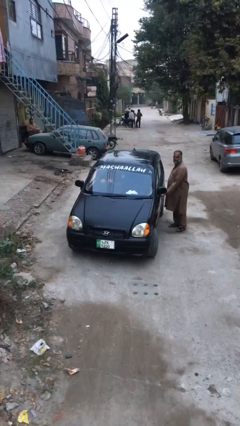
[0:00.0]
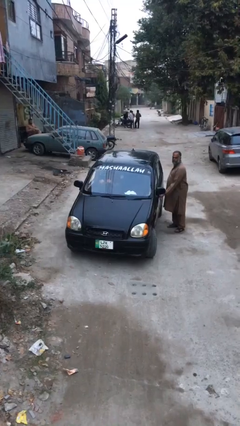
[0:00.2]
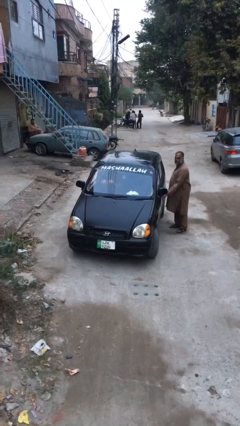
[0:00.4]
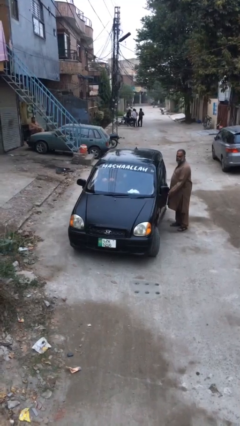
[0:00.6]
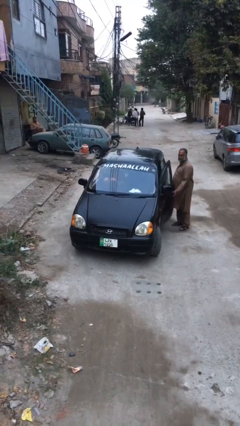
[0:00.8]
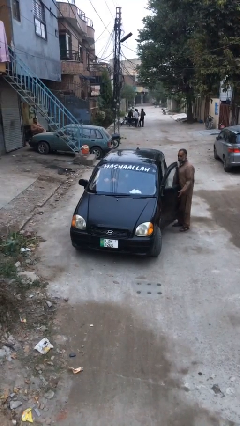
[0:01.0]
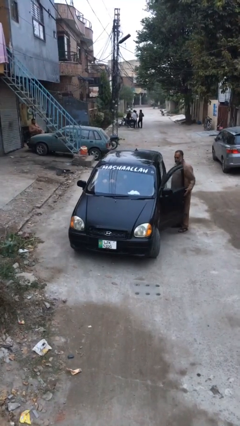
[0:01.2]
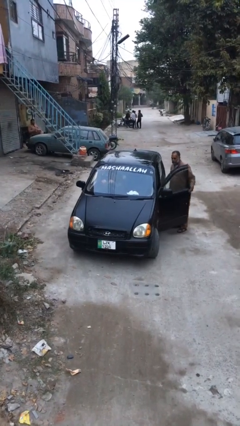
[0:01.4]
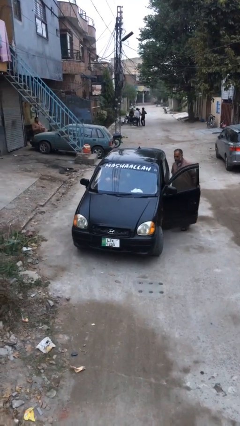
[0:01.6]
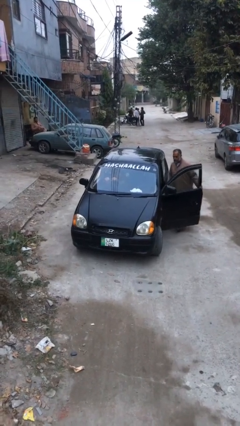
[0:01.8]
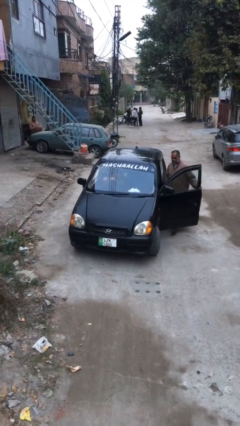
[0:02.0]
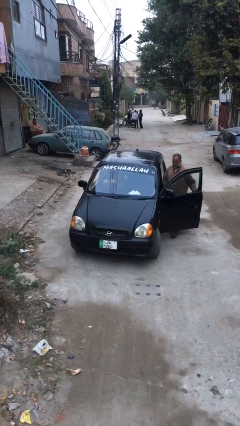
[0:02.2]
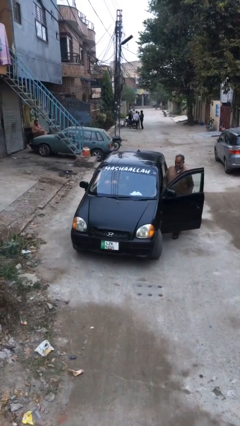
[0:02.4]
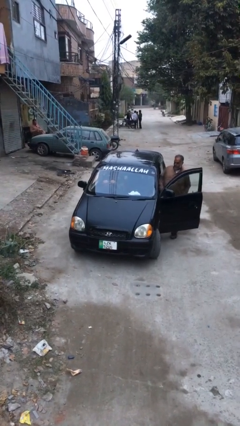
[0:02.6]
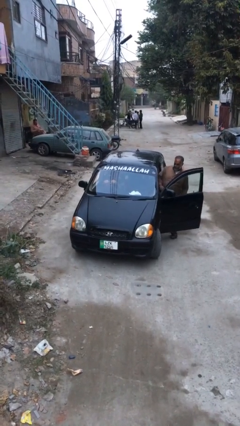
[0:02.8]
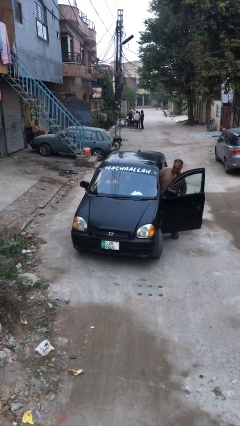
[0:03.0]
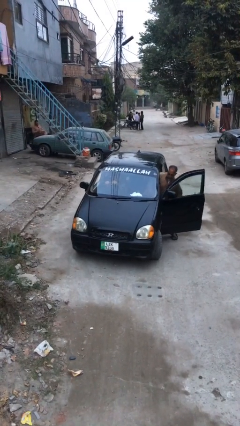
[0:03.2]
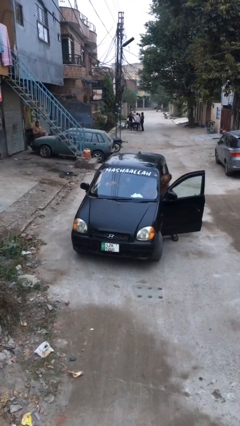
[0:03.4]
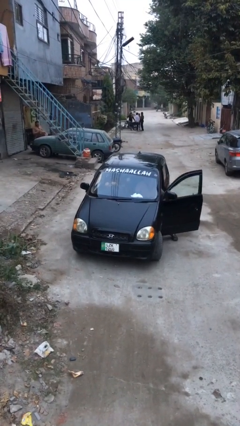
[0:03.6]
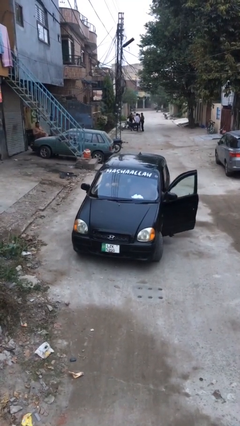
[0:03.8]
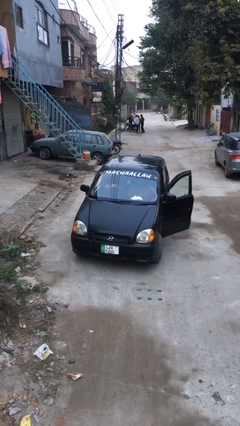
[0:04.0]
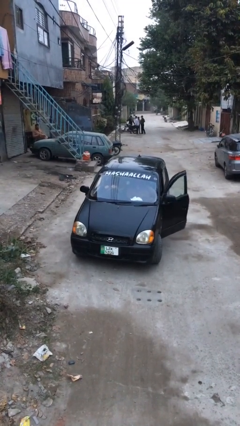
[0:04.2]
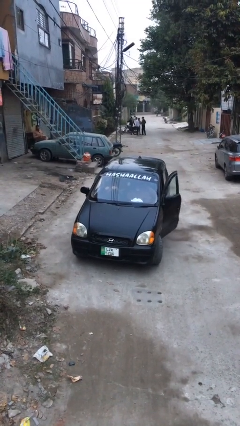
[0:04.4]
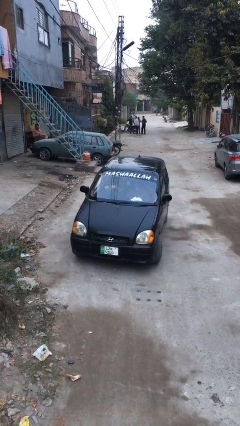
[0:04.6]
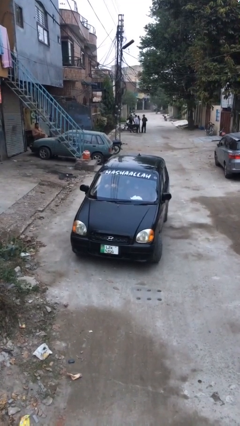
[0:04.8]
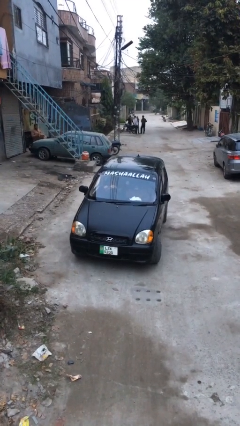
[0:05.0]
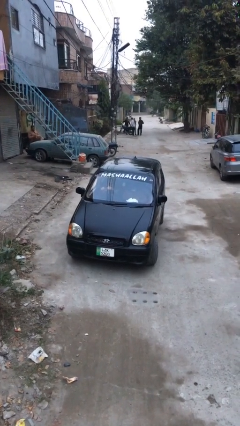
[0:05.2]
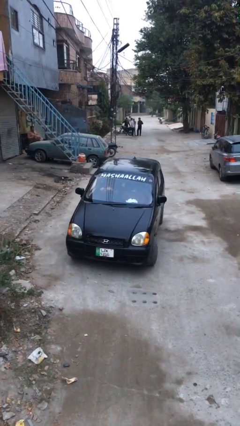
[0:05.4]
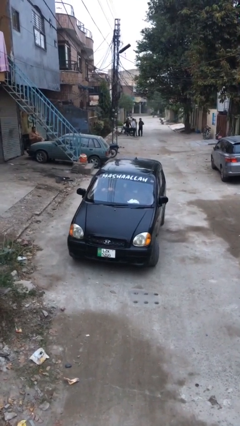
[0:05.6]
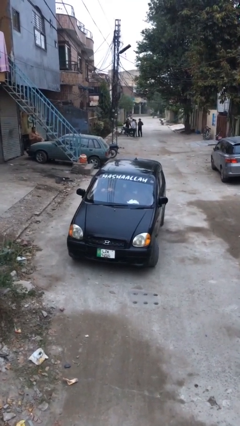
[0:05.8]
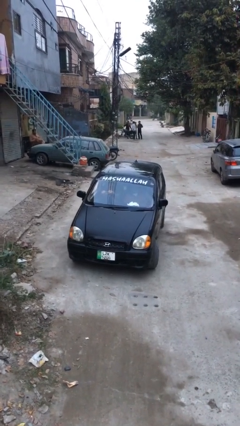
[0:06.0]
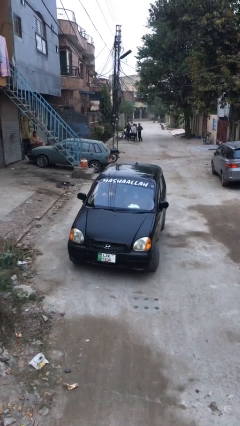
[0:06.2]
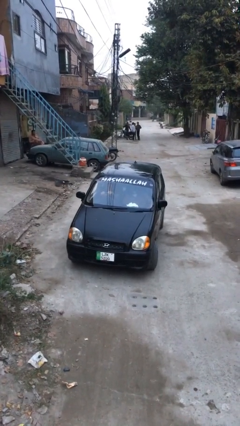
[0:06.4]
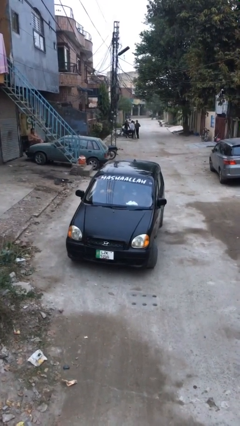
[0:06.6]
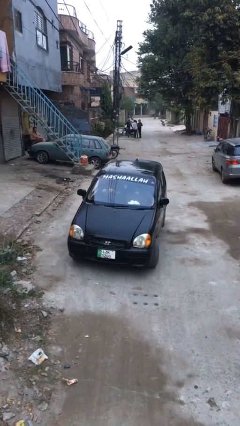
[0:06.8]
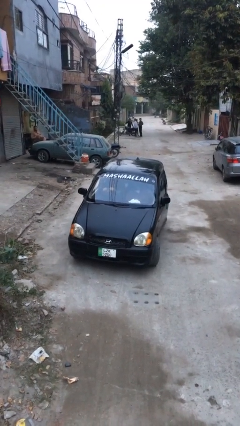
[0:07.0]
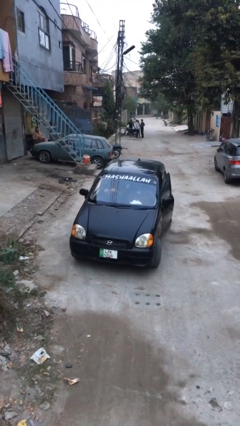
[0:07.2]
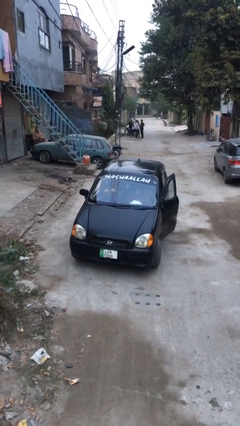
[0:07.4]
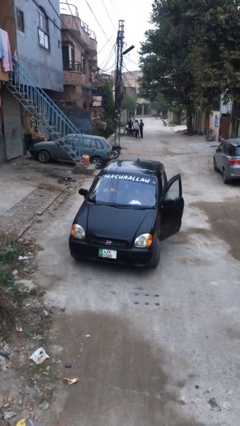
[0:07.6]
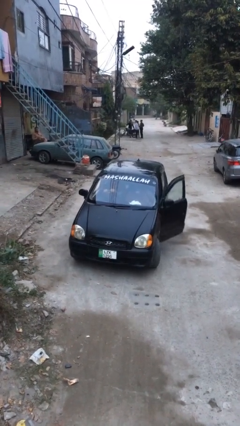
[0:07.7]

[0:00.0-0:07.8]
car picks up person

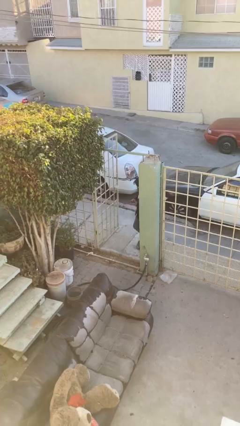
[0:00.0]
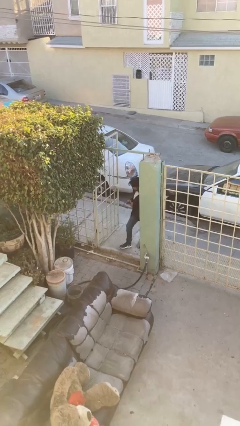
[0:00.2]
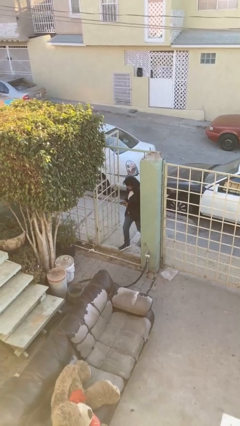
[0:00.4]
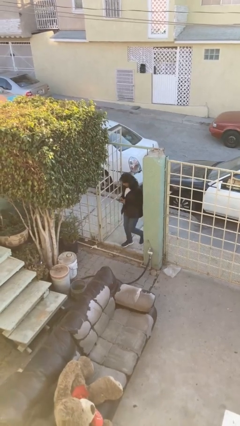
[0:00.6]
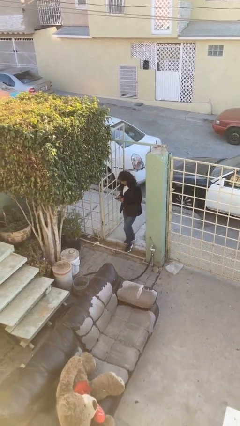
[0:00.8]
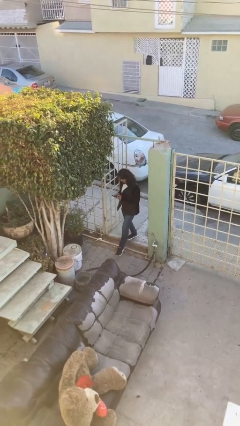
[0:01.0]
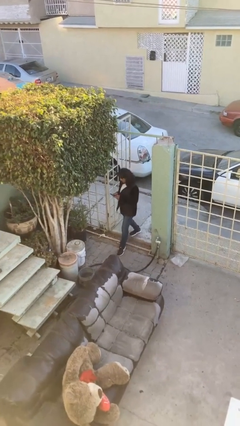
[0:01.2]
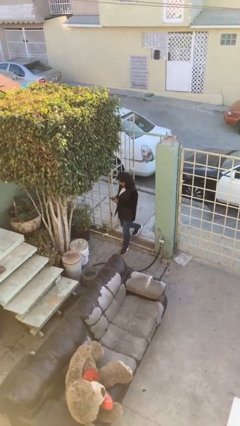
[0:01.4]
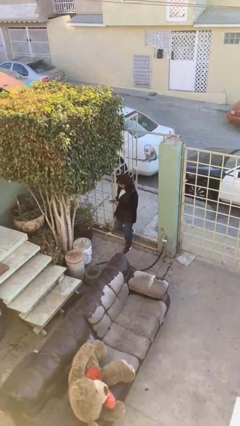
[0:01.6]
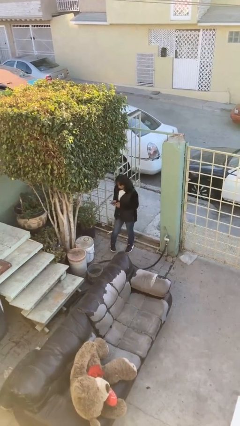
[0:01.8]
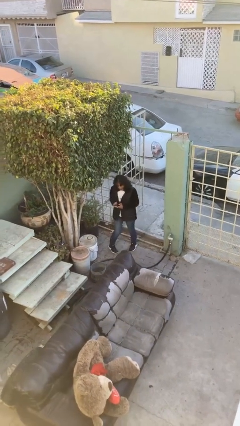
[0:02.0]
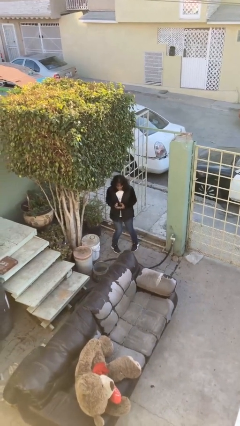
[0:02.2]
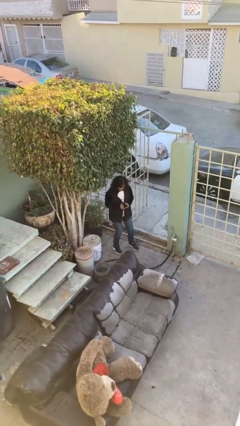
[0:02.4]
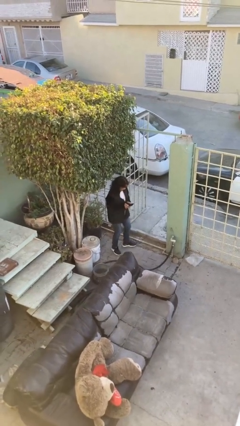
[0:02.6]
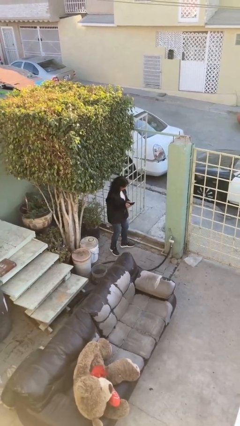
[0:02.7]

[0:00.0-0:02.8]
person enters scene through structure

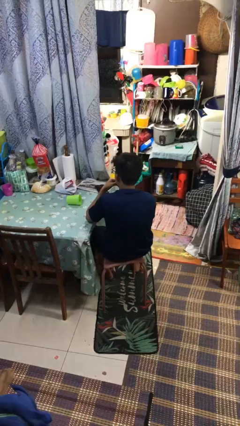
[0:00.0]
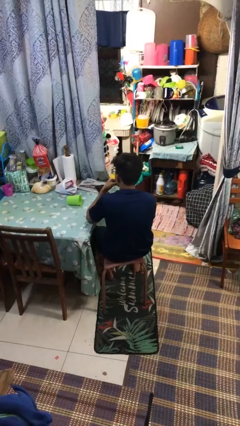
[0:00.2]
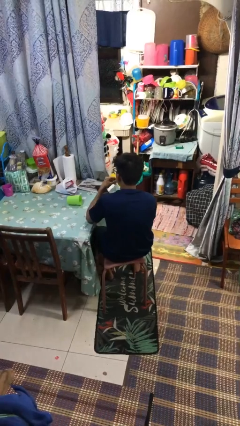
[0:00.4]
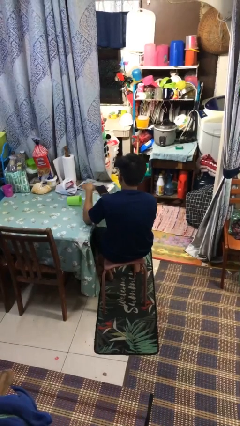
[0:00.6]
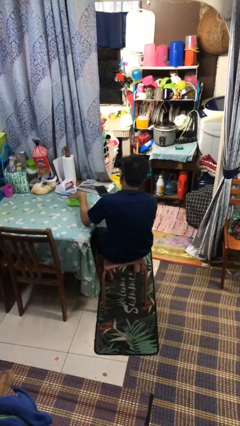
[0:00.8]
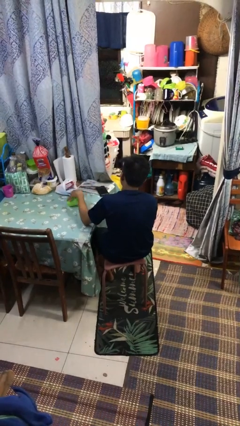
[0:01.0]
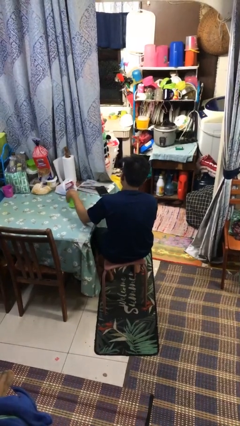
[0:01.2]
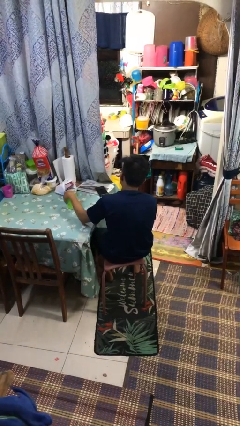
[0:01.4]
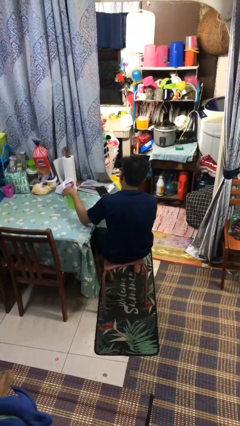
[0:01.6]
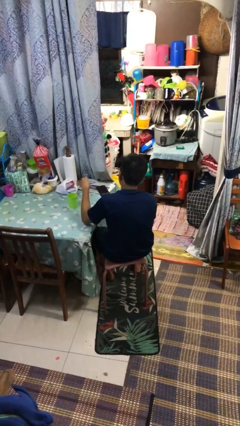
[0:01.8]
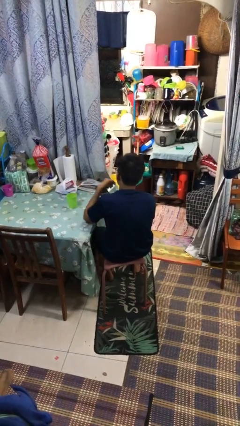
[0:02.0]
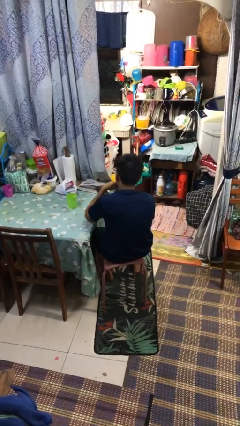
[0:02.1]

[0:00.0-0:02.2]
person sets upright glass

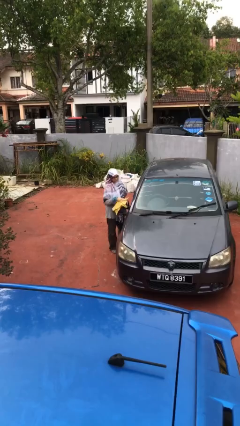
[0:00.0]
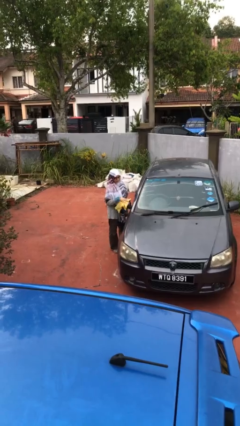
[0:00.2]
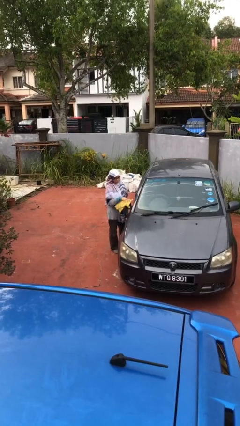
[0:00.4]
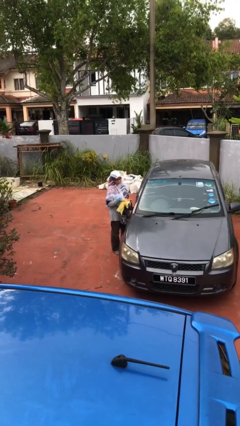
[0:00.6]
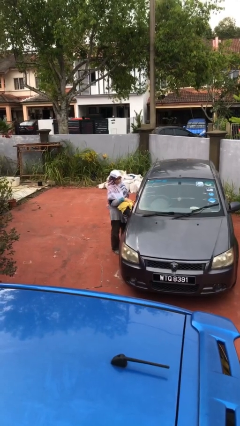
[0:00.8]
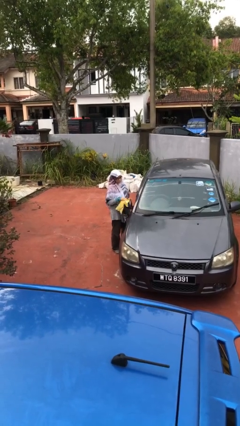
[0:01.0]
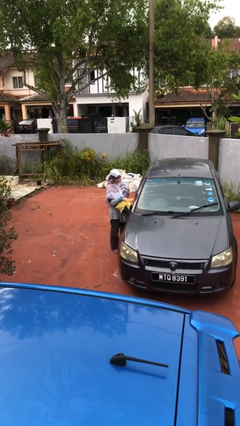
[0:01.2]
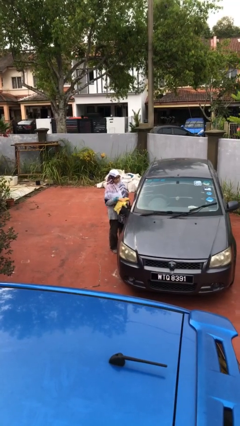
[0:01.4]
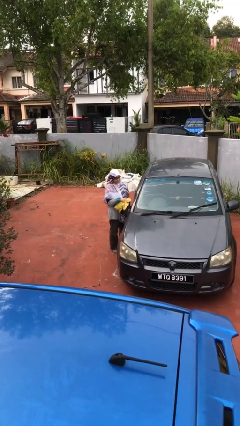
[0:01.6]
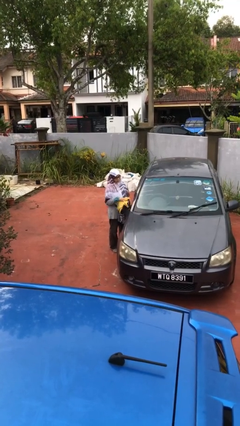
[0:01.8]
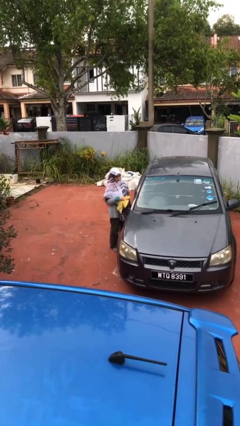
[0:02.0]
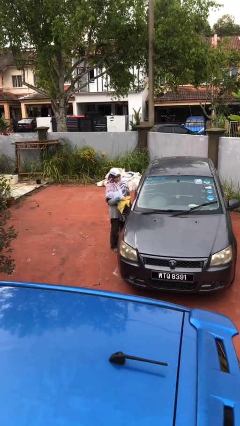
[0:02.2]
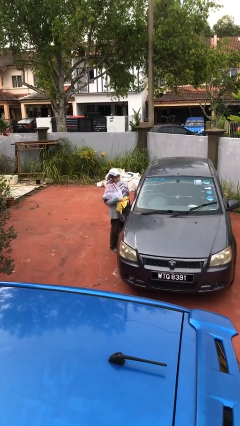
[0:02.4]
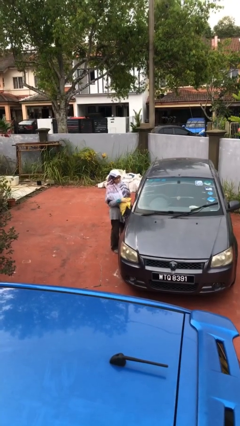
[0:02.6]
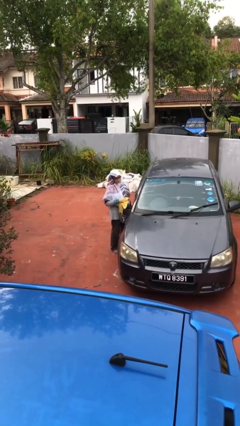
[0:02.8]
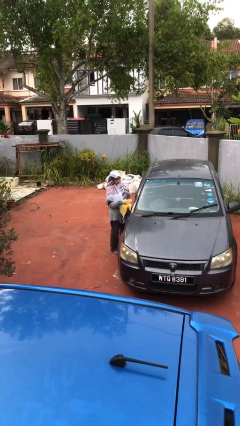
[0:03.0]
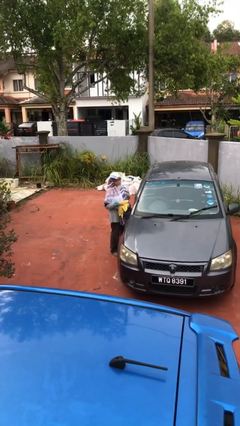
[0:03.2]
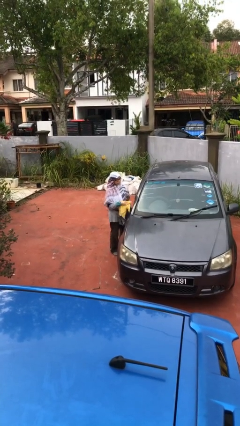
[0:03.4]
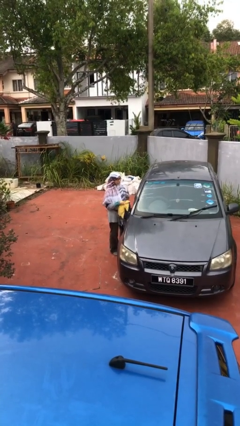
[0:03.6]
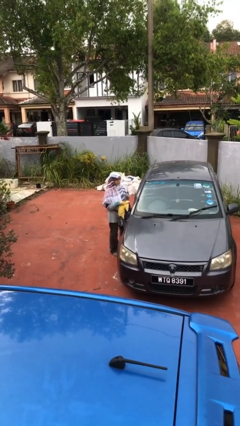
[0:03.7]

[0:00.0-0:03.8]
person polishes car with rag

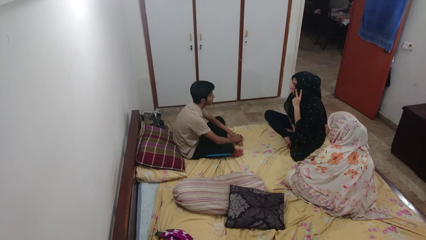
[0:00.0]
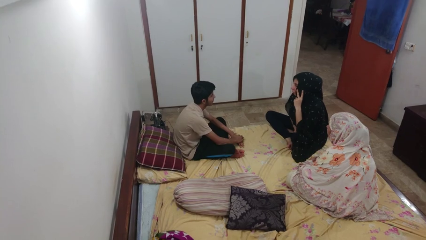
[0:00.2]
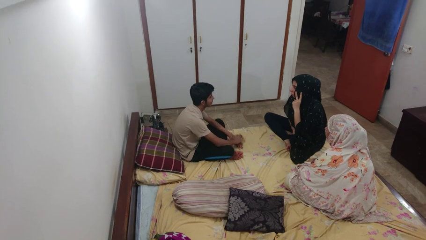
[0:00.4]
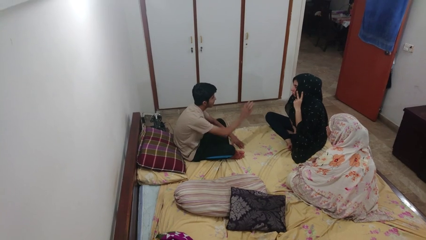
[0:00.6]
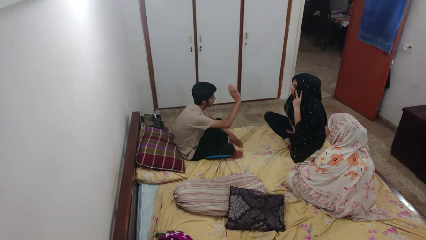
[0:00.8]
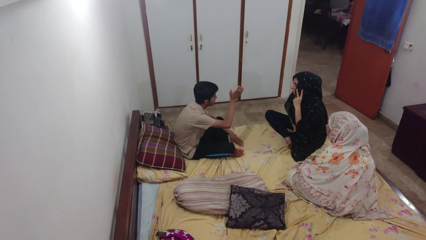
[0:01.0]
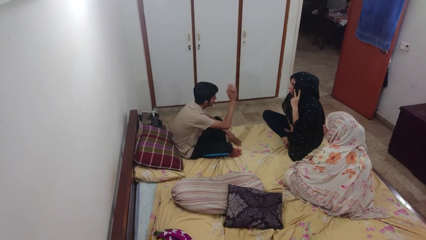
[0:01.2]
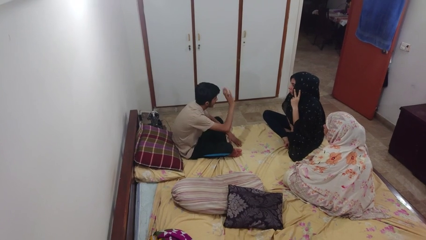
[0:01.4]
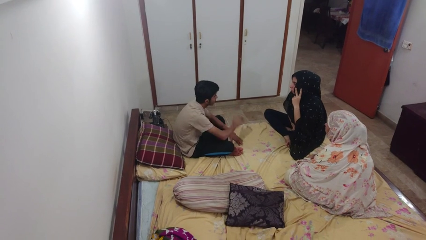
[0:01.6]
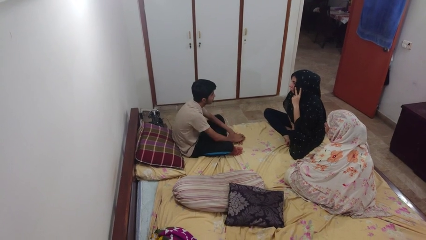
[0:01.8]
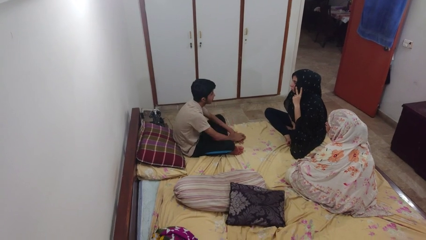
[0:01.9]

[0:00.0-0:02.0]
person waves at person
